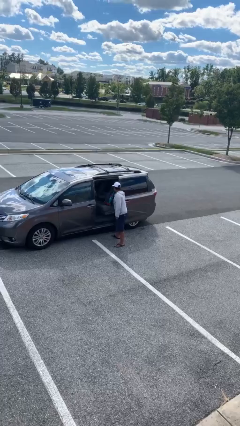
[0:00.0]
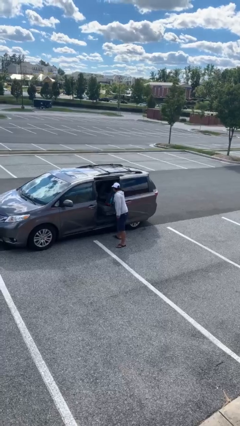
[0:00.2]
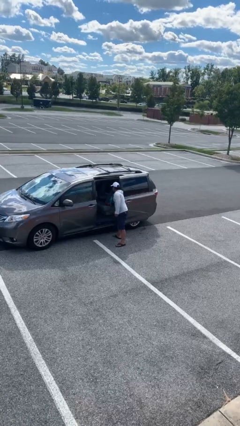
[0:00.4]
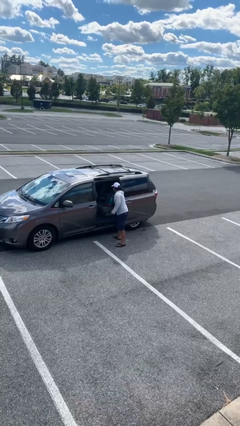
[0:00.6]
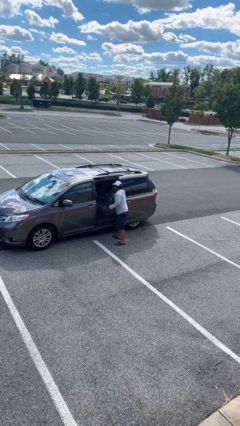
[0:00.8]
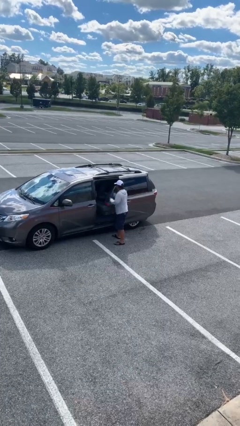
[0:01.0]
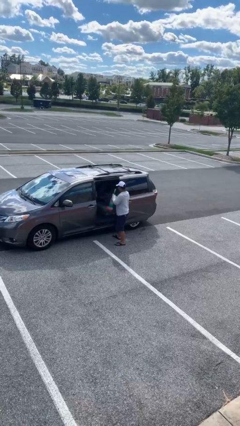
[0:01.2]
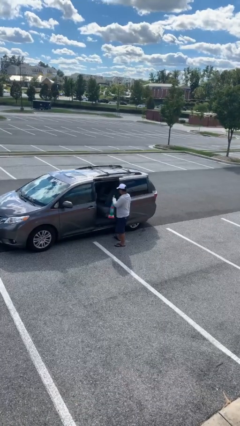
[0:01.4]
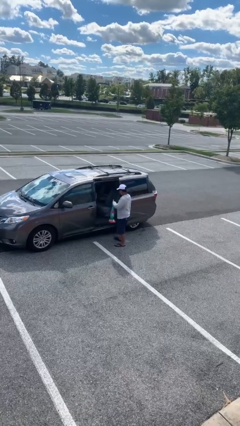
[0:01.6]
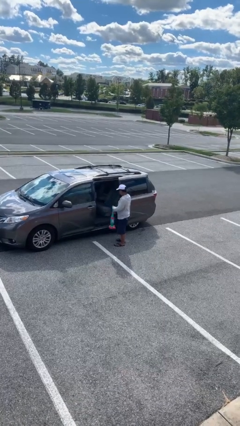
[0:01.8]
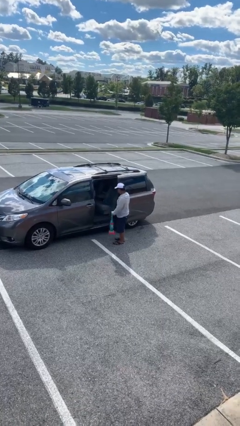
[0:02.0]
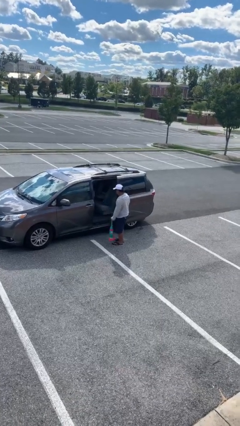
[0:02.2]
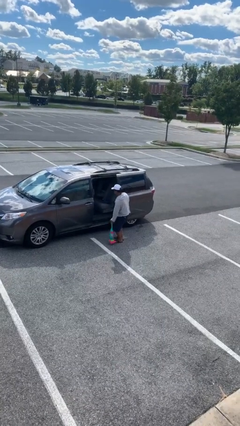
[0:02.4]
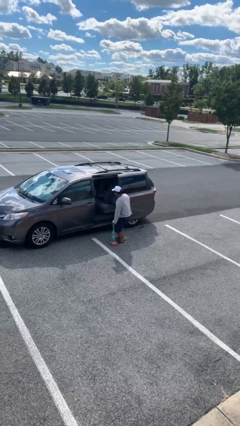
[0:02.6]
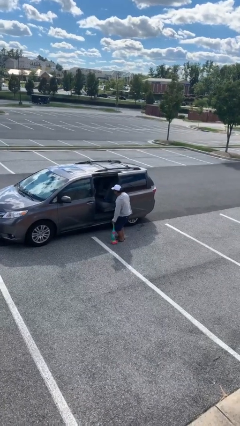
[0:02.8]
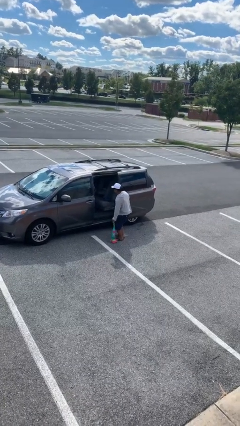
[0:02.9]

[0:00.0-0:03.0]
person unloads car

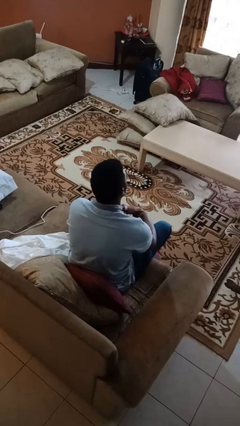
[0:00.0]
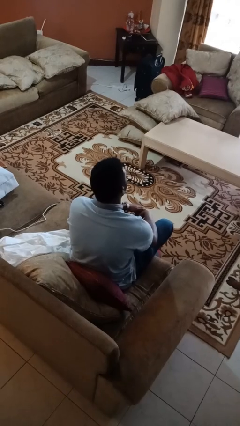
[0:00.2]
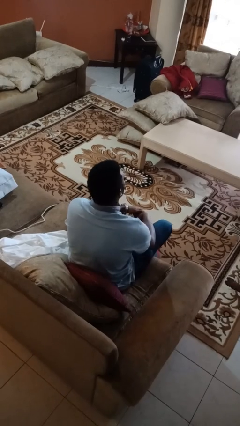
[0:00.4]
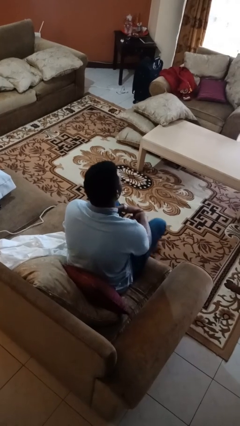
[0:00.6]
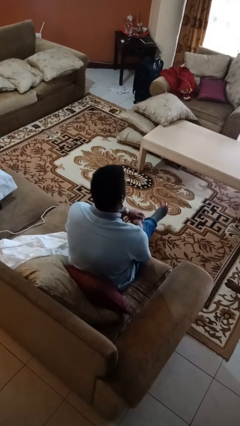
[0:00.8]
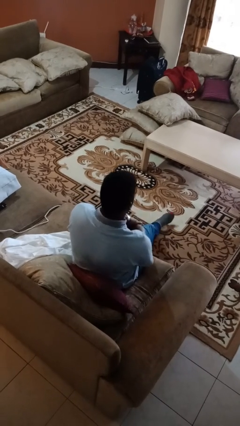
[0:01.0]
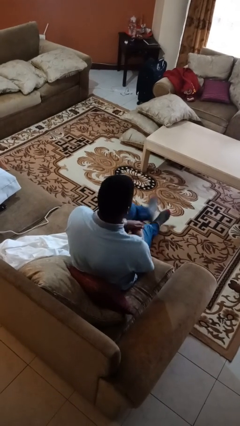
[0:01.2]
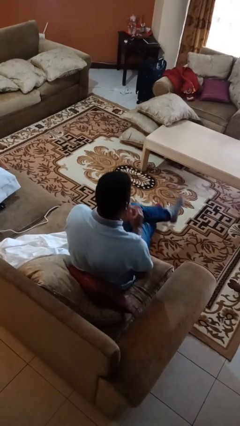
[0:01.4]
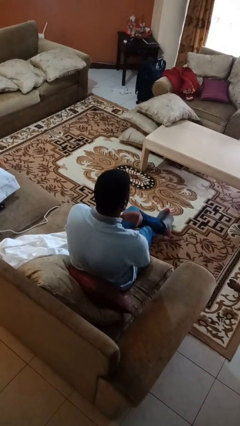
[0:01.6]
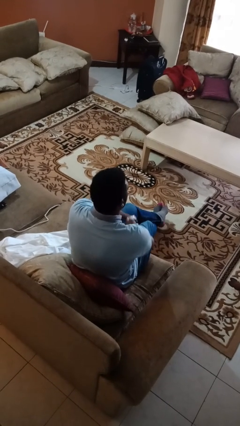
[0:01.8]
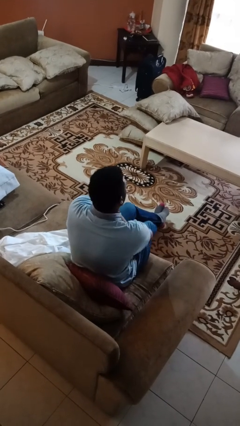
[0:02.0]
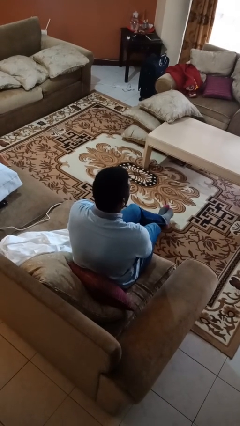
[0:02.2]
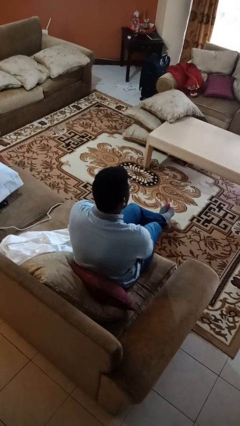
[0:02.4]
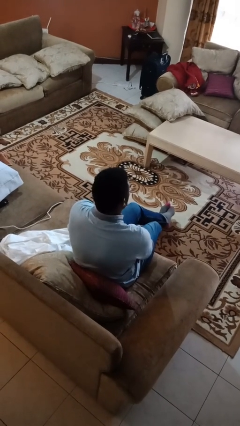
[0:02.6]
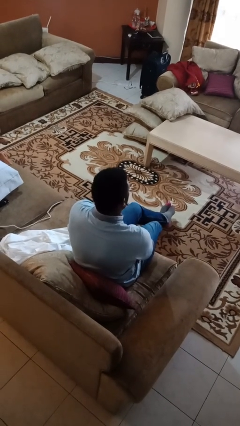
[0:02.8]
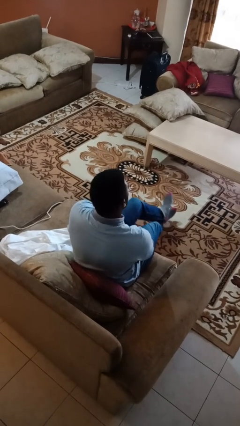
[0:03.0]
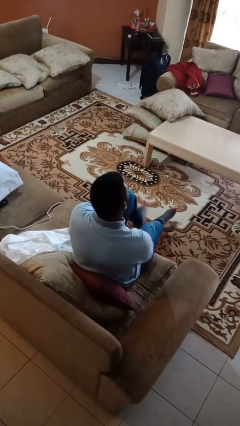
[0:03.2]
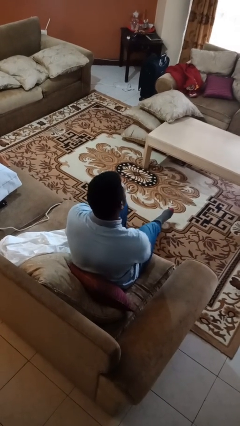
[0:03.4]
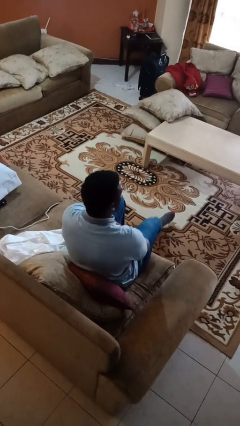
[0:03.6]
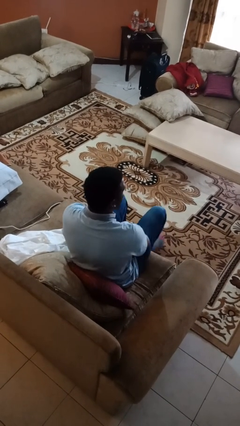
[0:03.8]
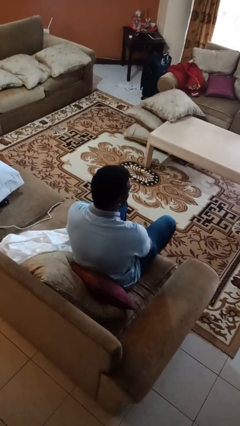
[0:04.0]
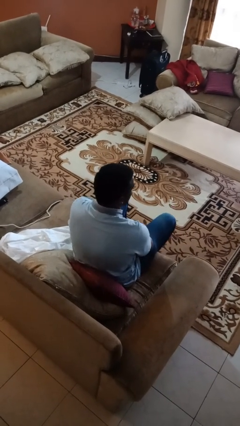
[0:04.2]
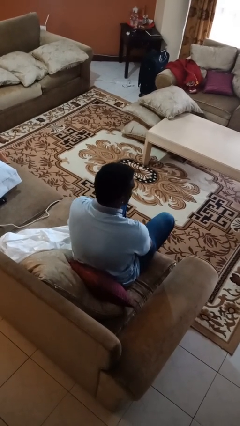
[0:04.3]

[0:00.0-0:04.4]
person crosses legs

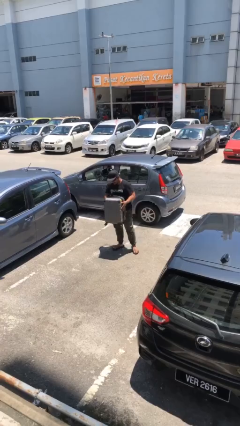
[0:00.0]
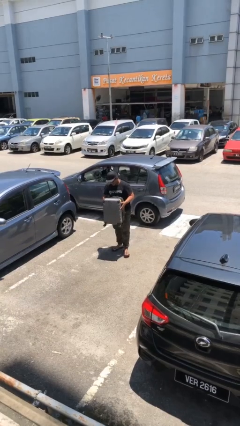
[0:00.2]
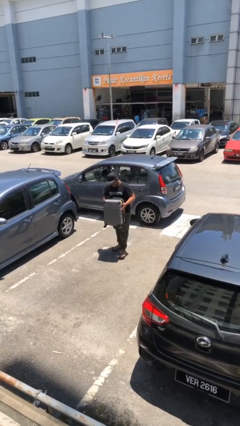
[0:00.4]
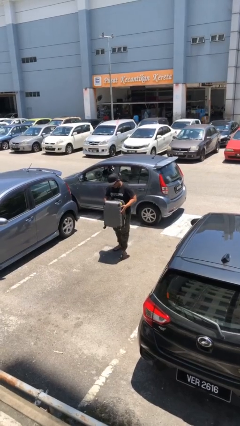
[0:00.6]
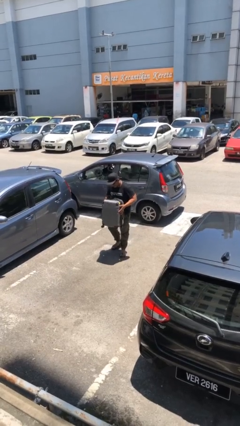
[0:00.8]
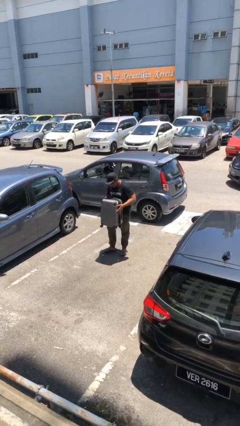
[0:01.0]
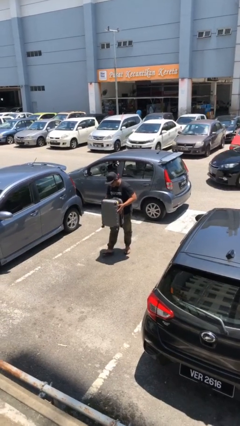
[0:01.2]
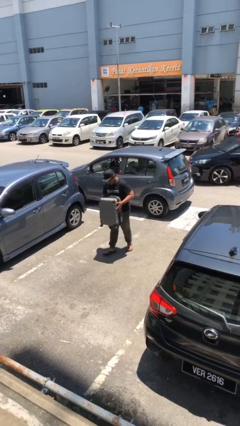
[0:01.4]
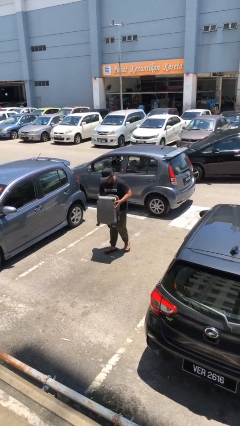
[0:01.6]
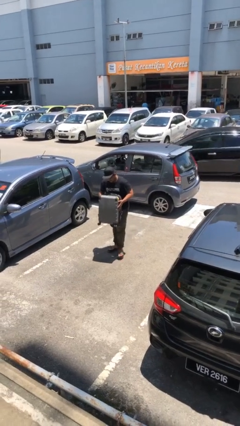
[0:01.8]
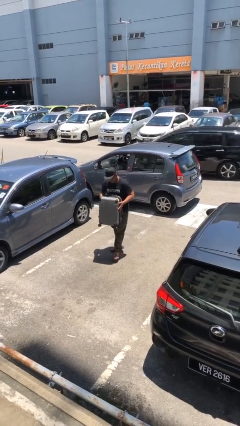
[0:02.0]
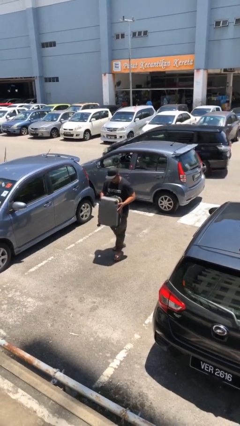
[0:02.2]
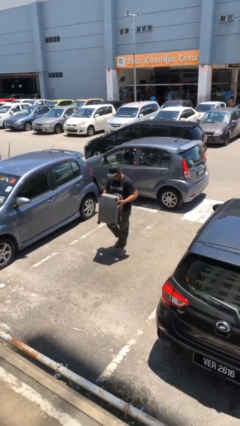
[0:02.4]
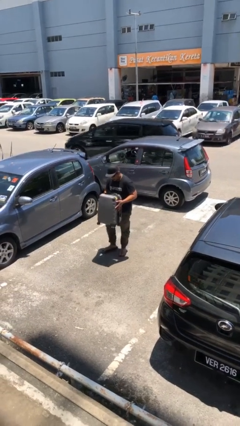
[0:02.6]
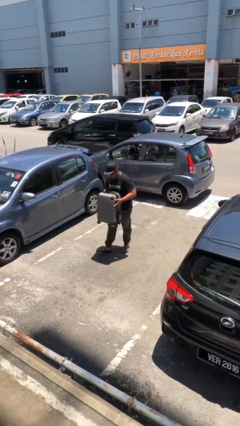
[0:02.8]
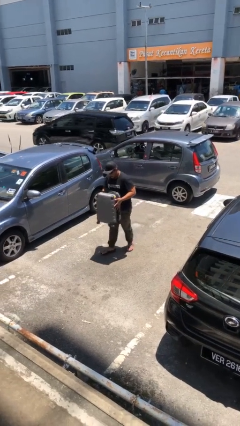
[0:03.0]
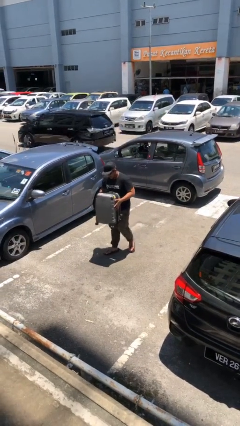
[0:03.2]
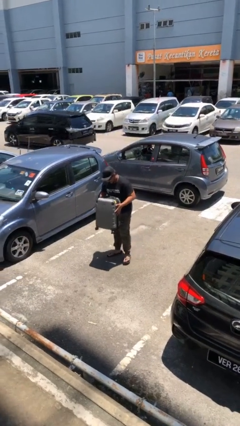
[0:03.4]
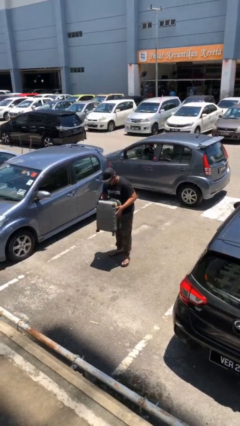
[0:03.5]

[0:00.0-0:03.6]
person carries heavy object

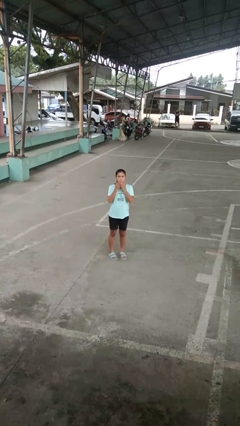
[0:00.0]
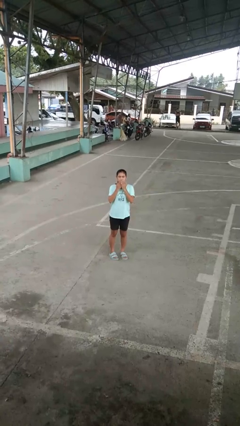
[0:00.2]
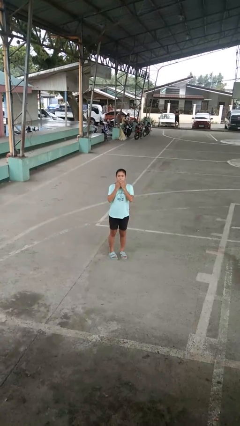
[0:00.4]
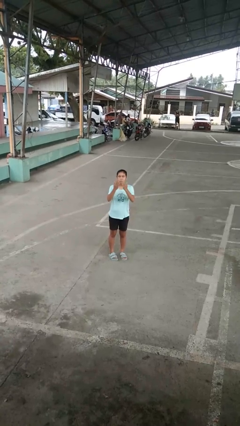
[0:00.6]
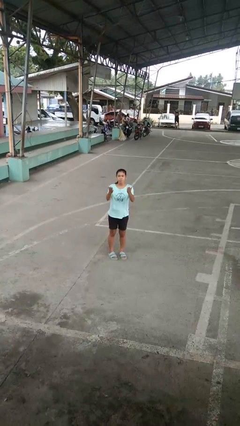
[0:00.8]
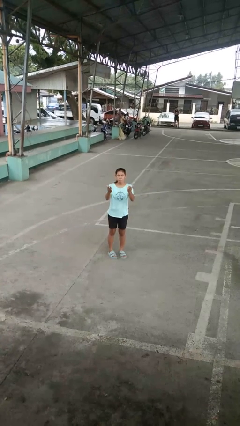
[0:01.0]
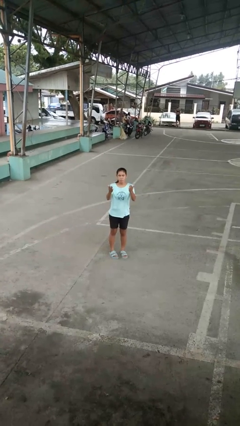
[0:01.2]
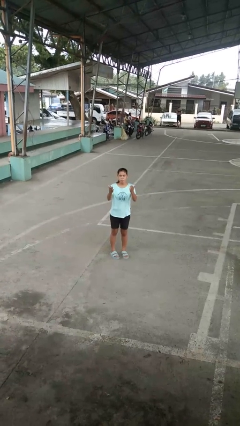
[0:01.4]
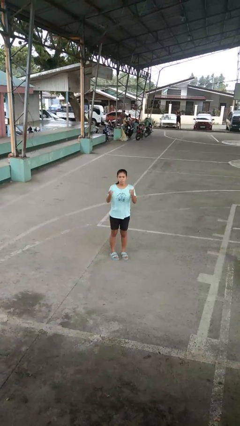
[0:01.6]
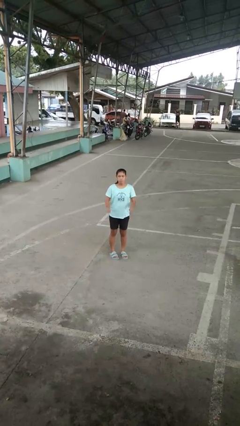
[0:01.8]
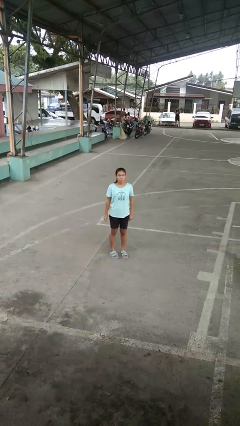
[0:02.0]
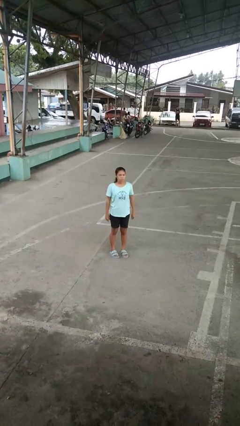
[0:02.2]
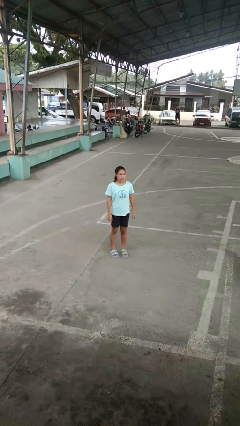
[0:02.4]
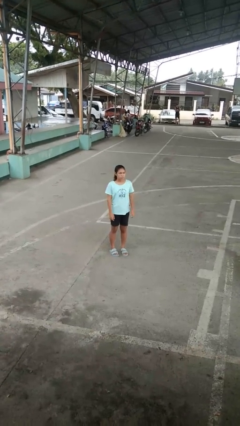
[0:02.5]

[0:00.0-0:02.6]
person gestures blow kiss

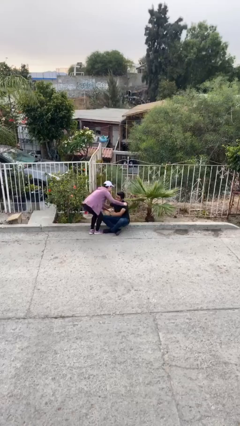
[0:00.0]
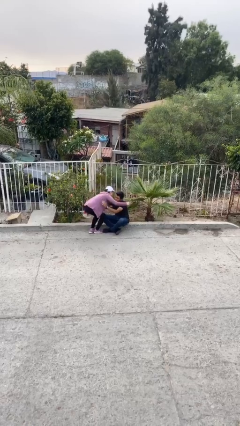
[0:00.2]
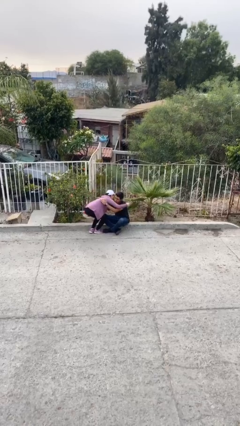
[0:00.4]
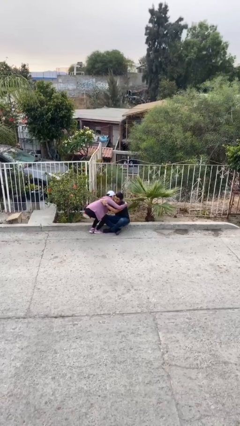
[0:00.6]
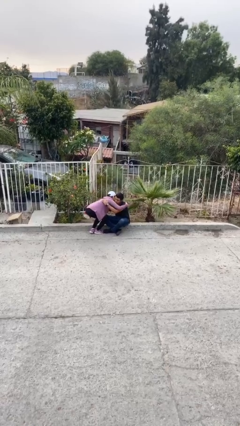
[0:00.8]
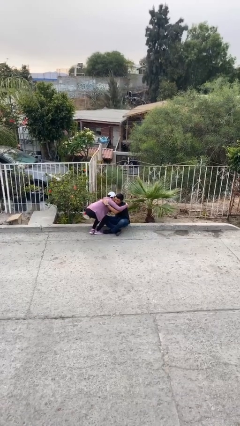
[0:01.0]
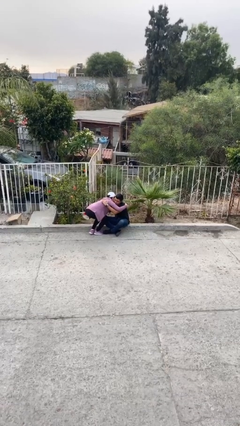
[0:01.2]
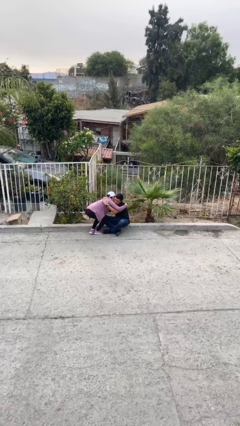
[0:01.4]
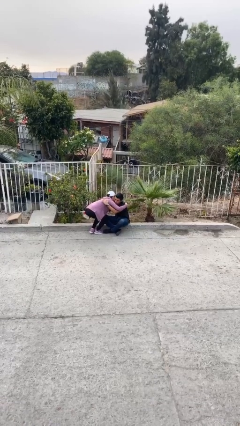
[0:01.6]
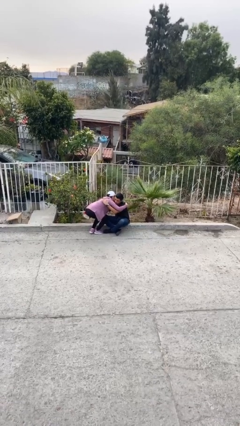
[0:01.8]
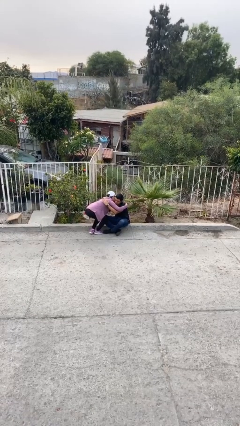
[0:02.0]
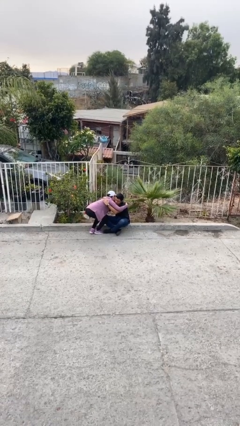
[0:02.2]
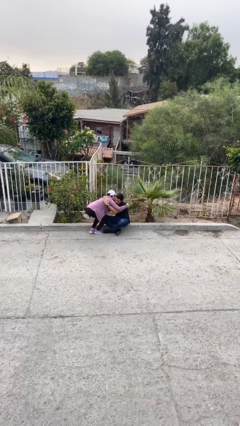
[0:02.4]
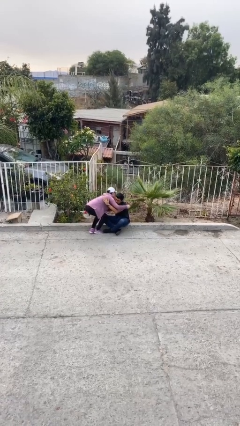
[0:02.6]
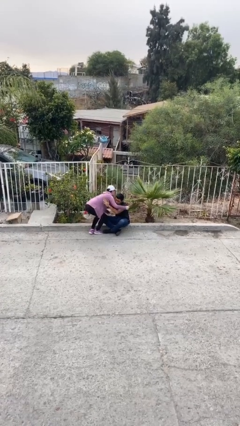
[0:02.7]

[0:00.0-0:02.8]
person embraces person

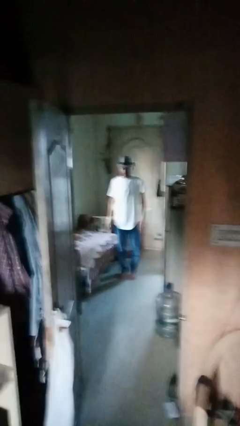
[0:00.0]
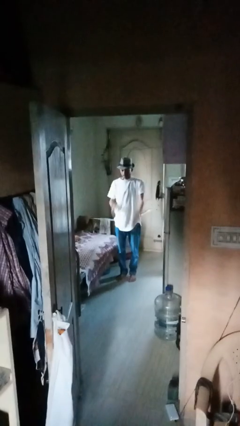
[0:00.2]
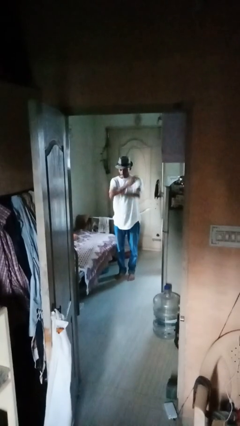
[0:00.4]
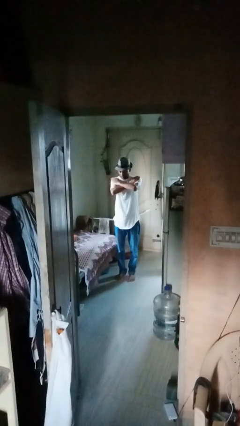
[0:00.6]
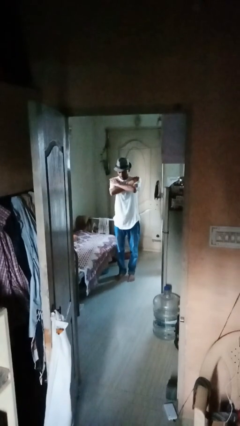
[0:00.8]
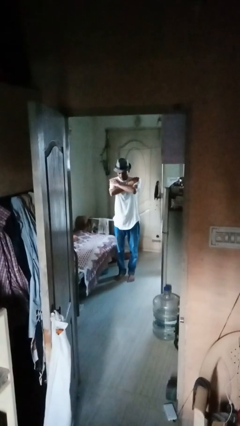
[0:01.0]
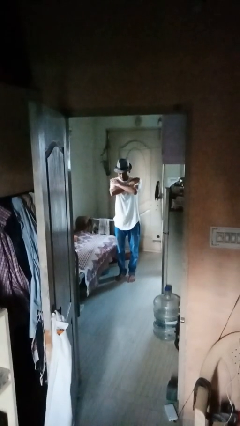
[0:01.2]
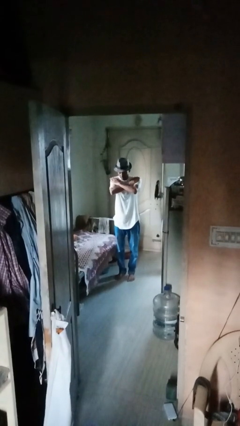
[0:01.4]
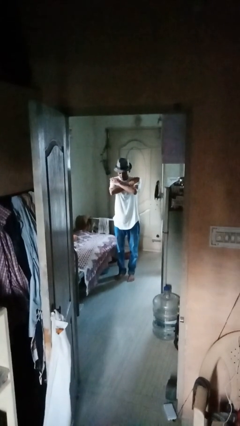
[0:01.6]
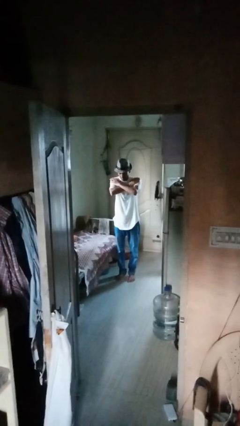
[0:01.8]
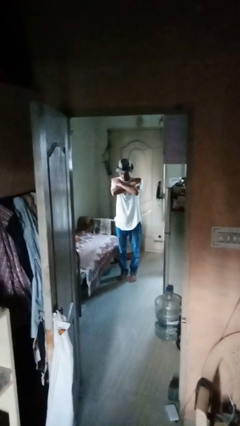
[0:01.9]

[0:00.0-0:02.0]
person gestures arms x
